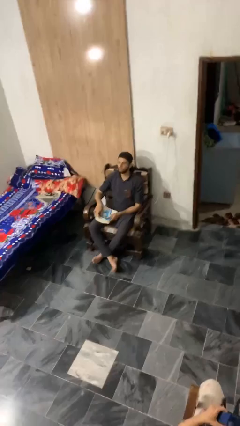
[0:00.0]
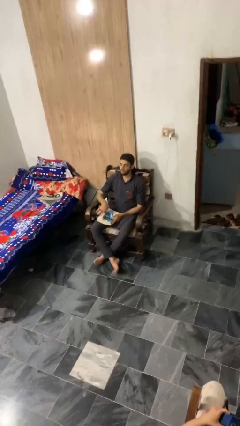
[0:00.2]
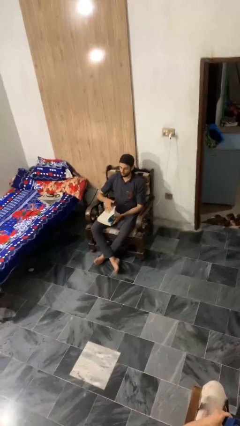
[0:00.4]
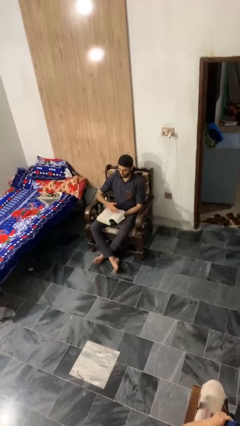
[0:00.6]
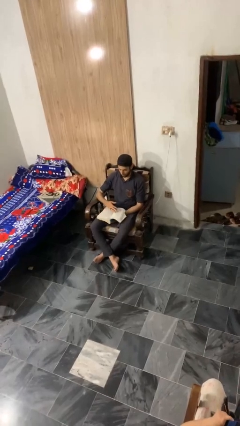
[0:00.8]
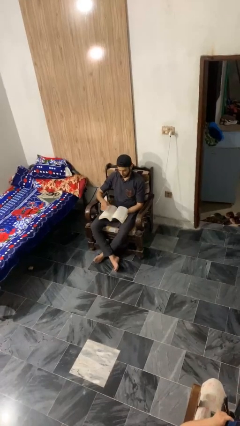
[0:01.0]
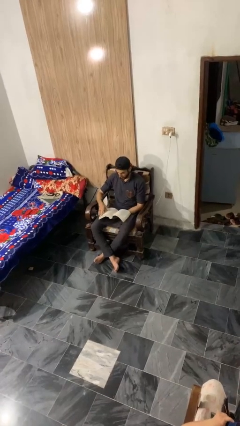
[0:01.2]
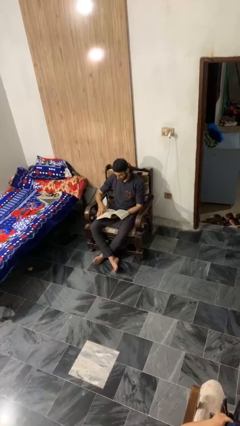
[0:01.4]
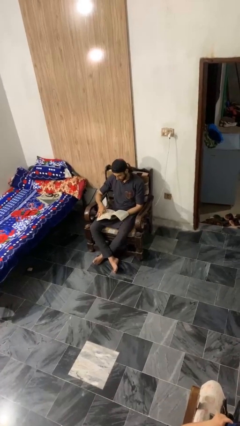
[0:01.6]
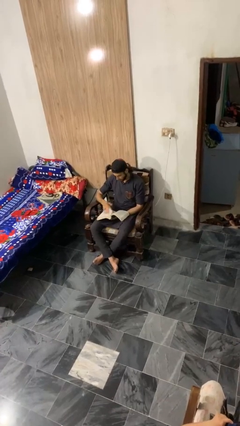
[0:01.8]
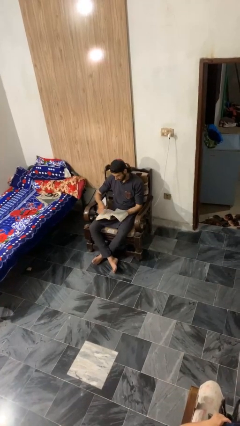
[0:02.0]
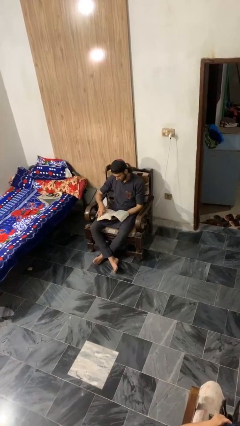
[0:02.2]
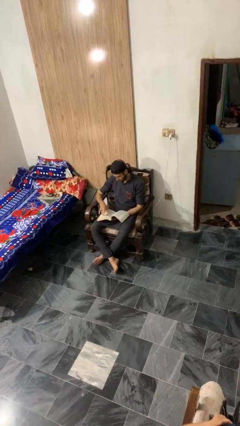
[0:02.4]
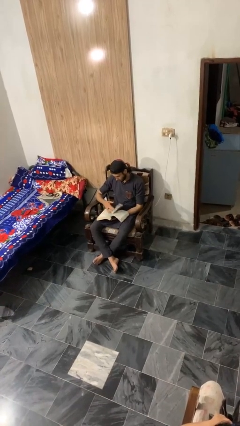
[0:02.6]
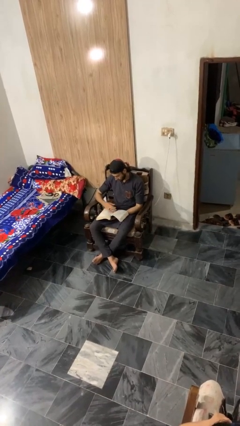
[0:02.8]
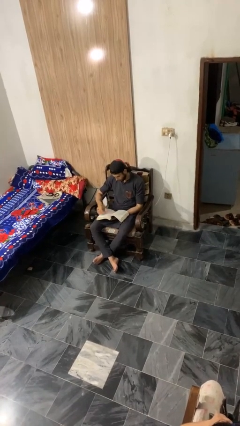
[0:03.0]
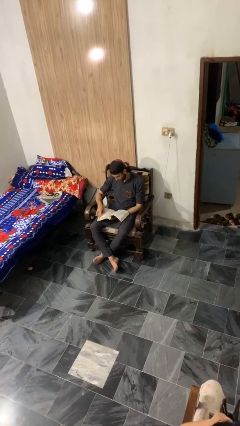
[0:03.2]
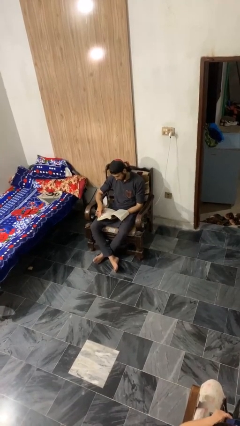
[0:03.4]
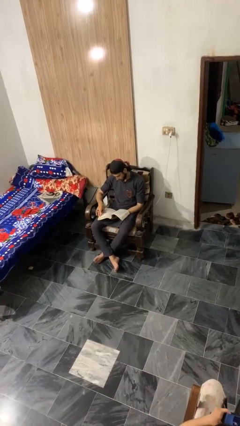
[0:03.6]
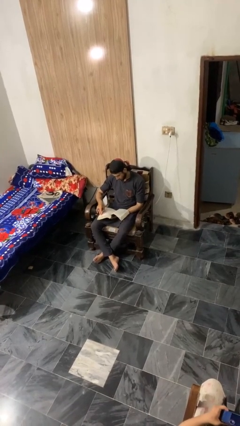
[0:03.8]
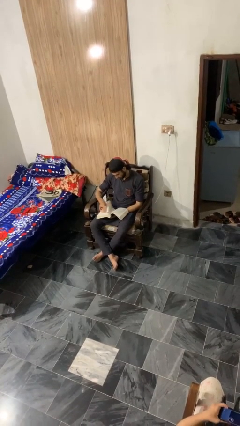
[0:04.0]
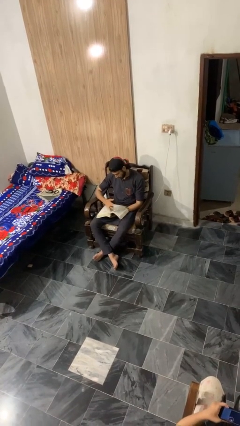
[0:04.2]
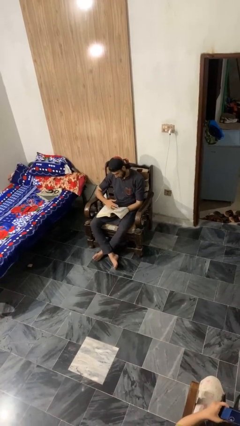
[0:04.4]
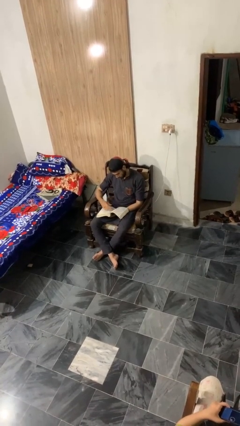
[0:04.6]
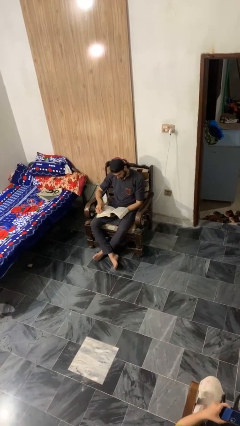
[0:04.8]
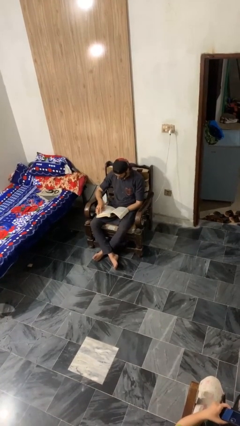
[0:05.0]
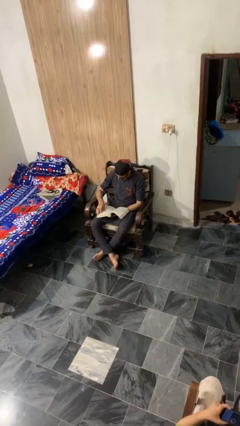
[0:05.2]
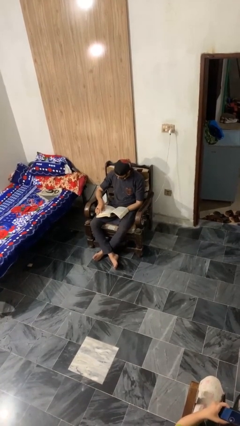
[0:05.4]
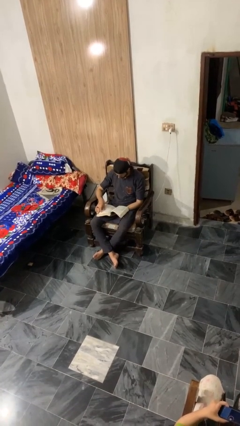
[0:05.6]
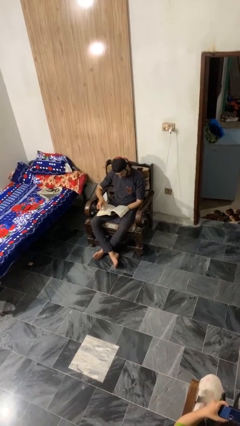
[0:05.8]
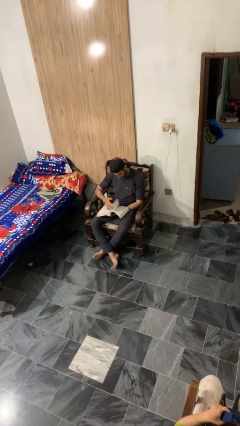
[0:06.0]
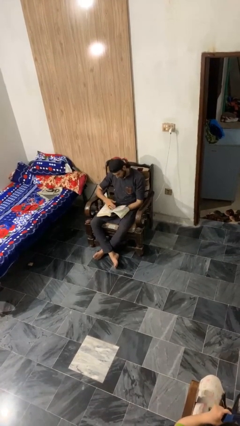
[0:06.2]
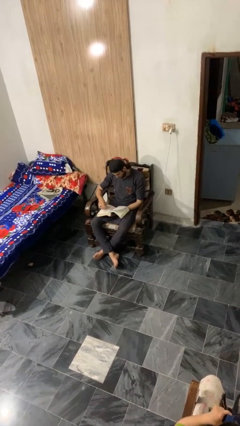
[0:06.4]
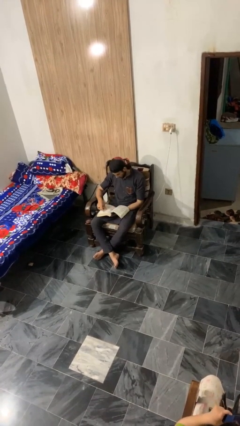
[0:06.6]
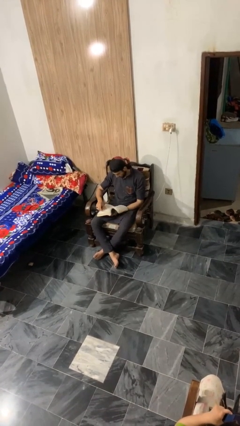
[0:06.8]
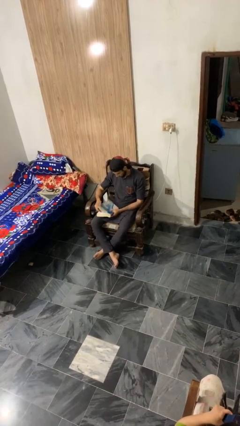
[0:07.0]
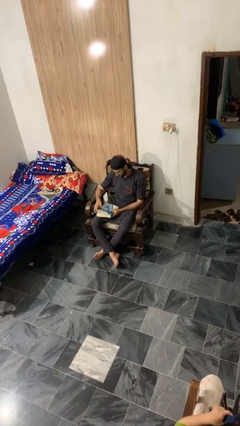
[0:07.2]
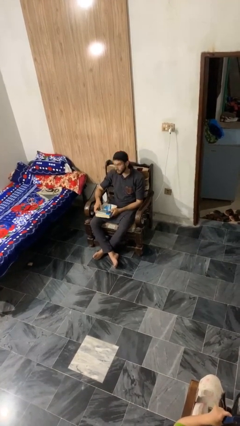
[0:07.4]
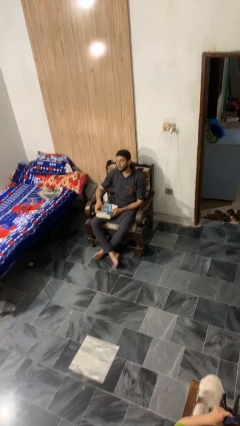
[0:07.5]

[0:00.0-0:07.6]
person reads book

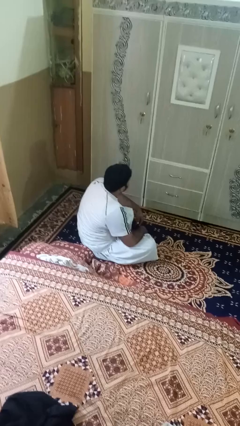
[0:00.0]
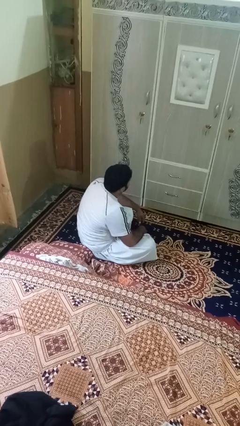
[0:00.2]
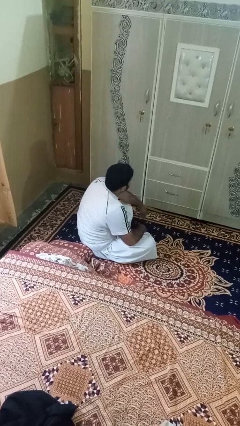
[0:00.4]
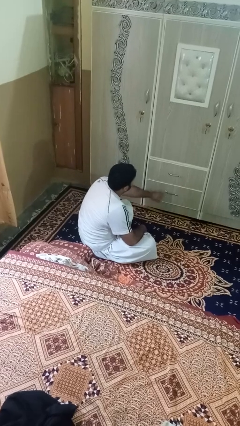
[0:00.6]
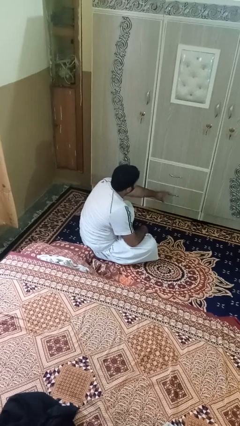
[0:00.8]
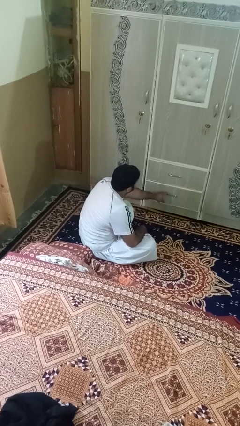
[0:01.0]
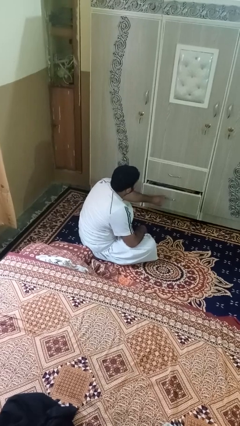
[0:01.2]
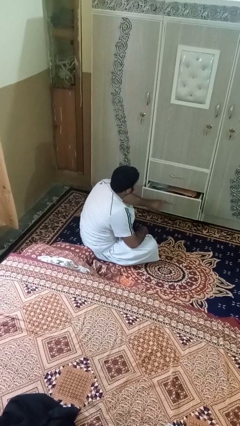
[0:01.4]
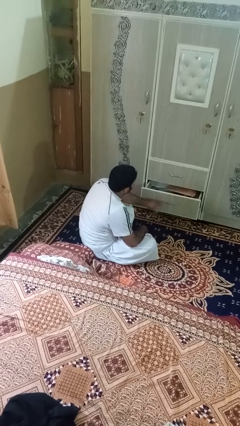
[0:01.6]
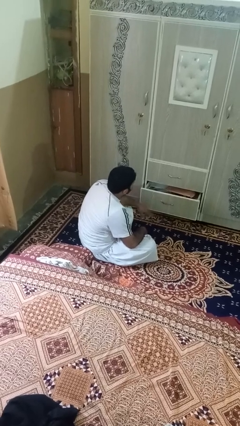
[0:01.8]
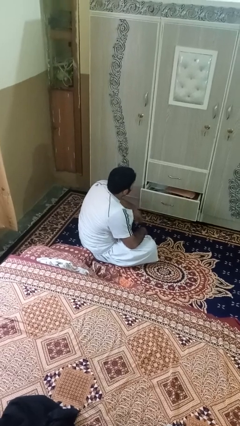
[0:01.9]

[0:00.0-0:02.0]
person opens dresser drawer

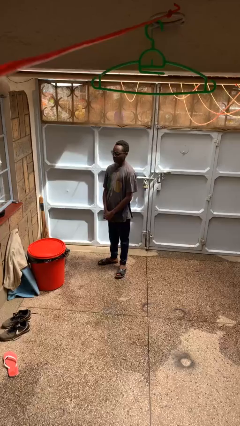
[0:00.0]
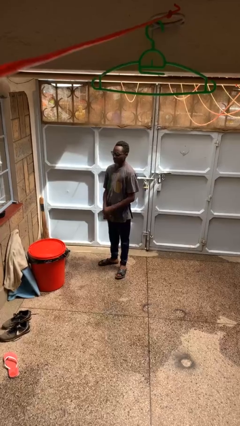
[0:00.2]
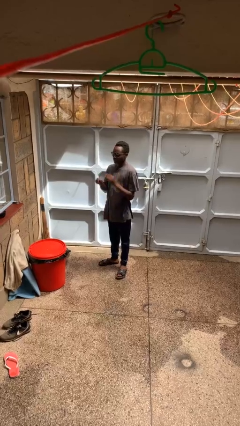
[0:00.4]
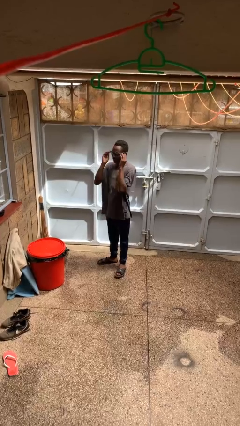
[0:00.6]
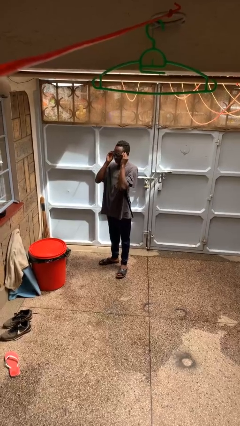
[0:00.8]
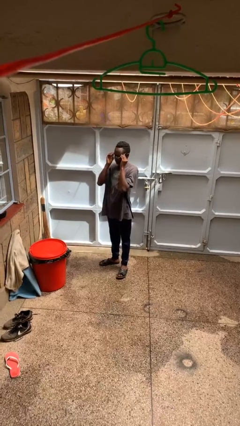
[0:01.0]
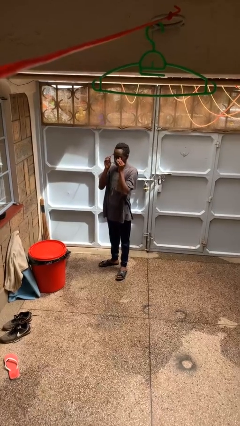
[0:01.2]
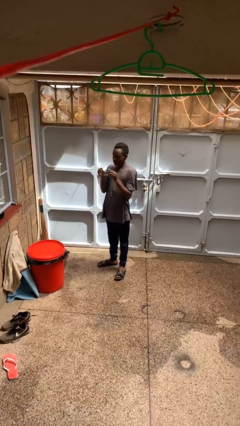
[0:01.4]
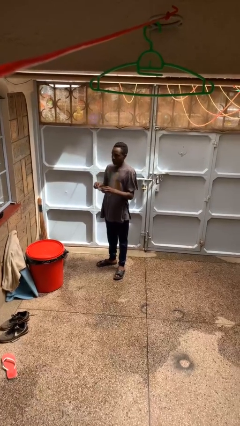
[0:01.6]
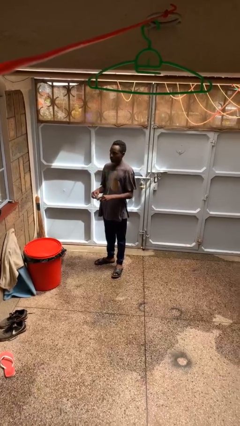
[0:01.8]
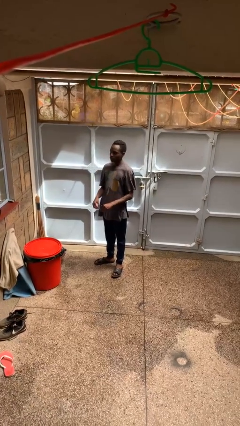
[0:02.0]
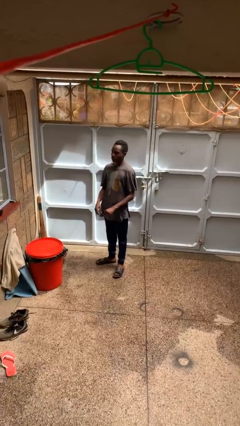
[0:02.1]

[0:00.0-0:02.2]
person takes off glasses

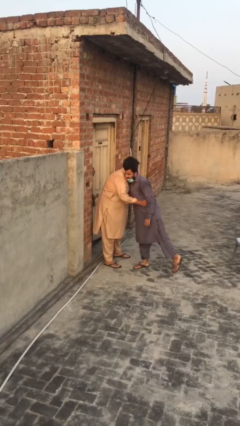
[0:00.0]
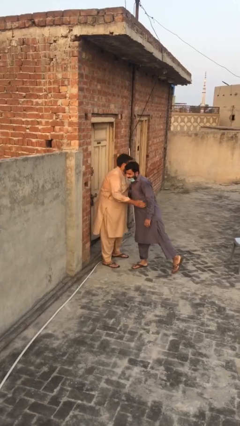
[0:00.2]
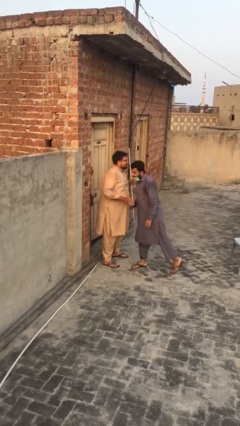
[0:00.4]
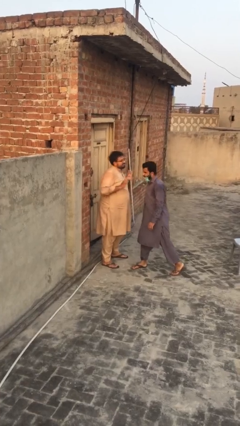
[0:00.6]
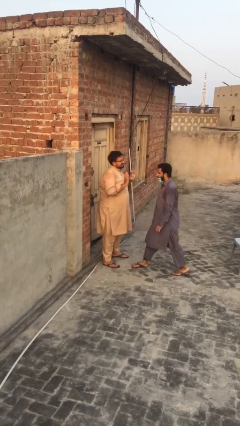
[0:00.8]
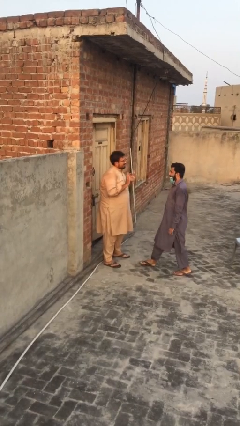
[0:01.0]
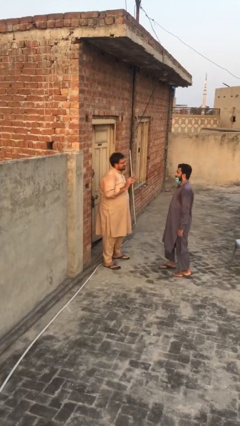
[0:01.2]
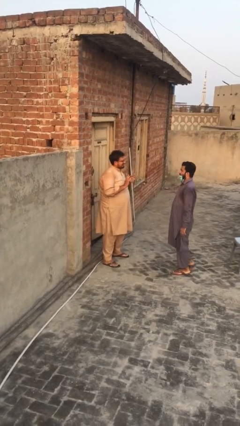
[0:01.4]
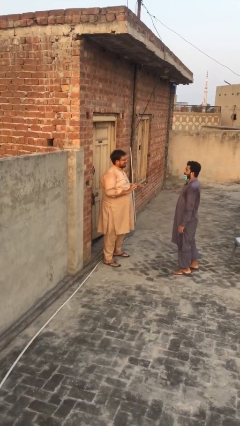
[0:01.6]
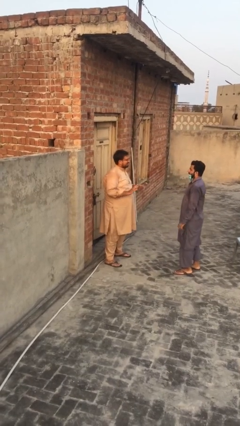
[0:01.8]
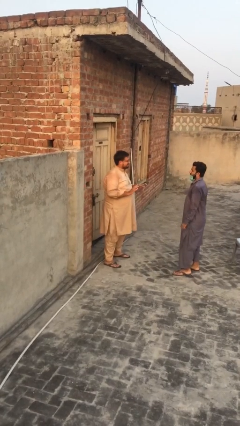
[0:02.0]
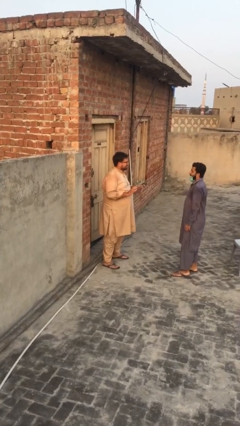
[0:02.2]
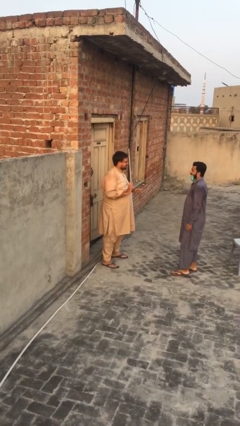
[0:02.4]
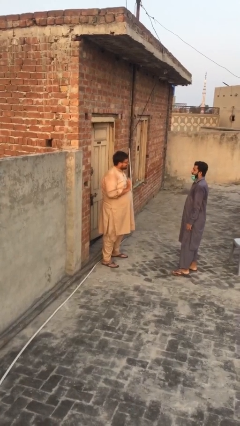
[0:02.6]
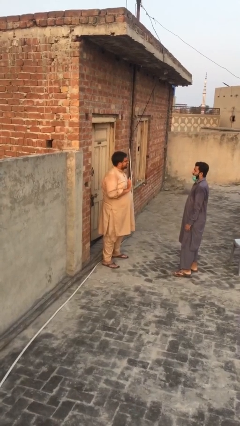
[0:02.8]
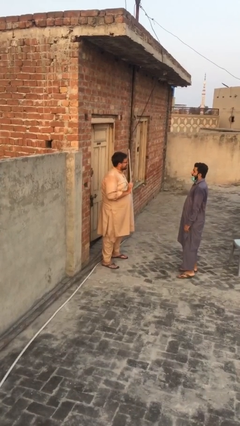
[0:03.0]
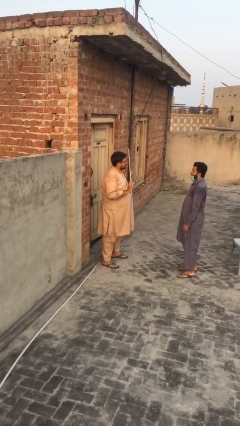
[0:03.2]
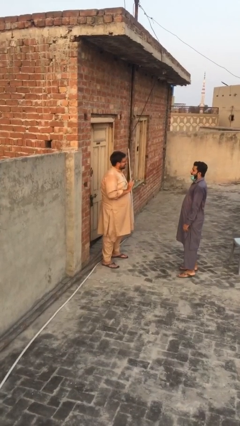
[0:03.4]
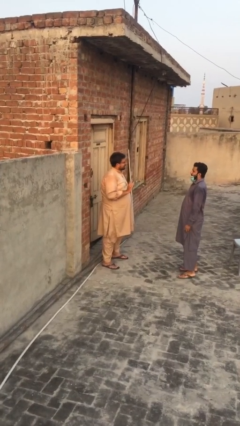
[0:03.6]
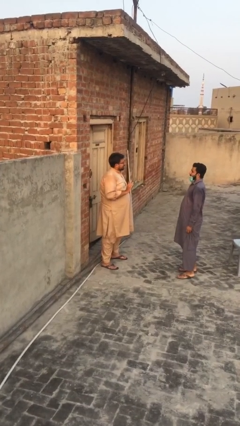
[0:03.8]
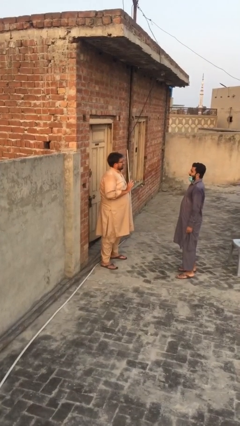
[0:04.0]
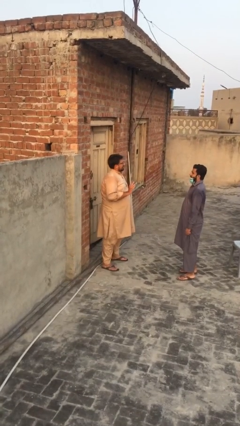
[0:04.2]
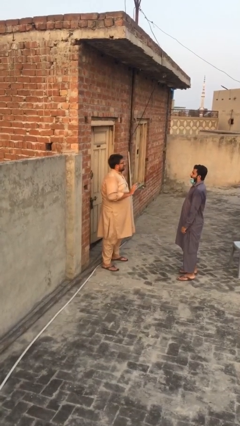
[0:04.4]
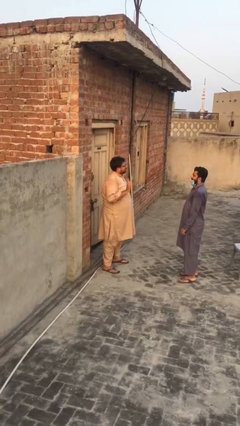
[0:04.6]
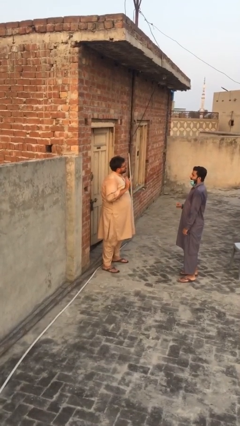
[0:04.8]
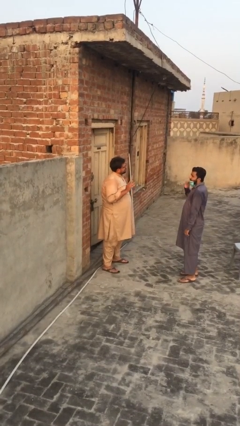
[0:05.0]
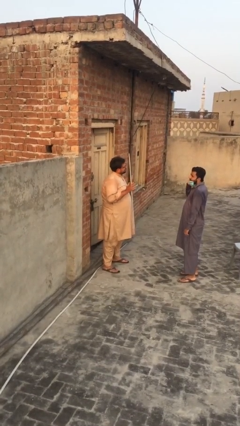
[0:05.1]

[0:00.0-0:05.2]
person talks to person

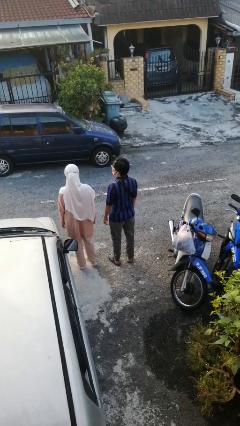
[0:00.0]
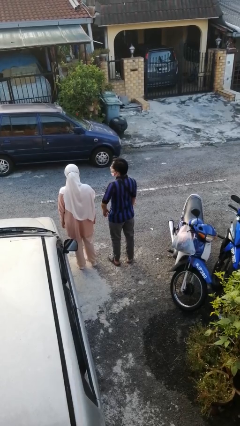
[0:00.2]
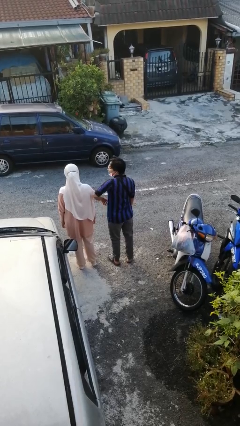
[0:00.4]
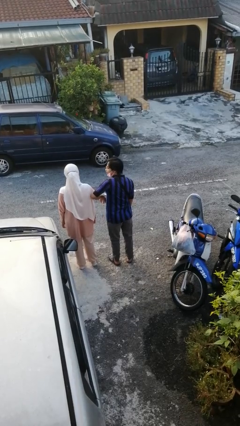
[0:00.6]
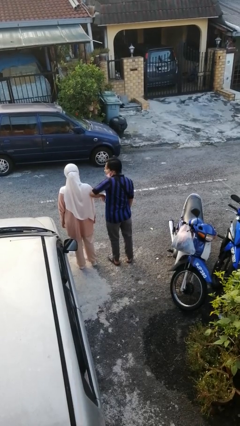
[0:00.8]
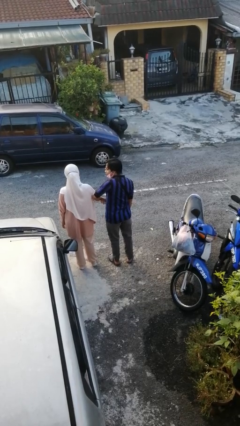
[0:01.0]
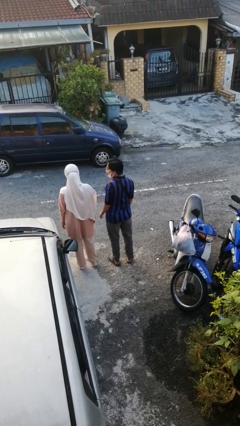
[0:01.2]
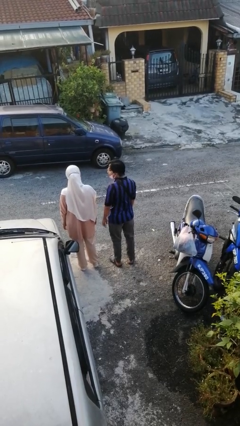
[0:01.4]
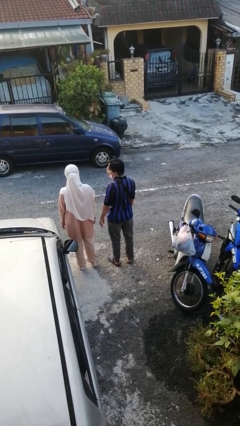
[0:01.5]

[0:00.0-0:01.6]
person nudges person with elbow
